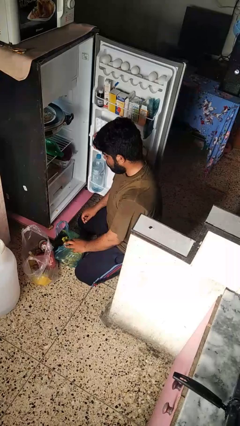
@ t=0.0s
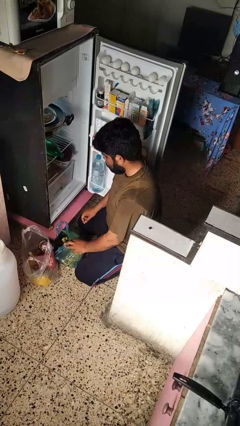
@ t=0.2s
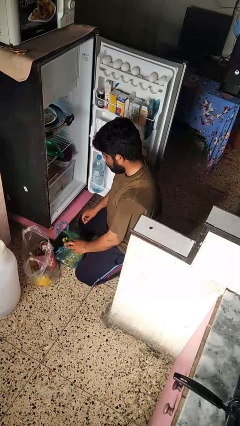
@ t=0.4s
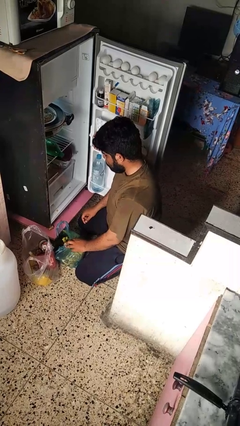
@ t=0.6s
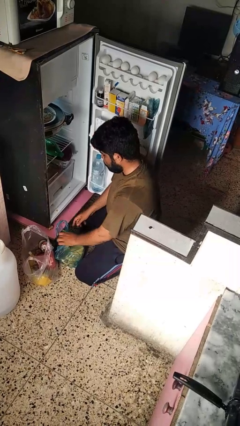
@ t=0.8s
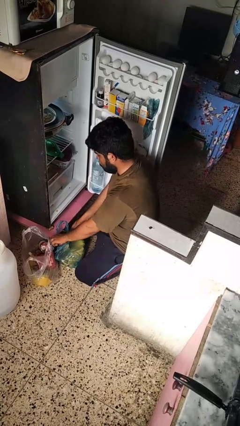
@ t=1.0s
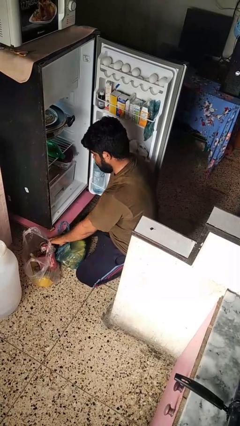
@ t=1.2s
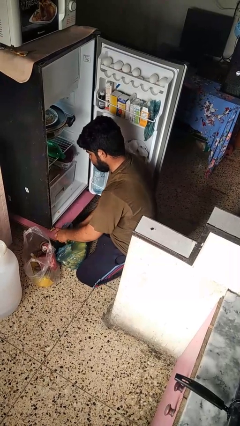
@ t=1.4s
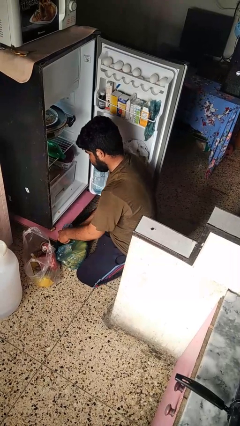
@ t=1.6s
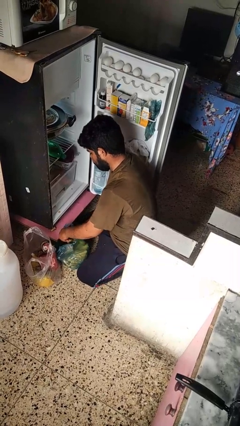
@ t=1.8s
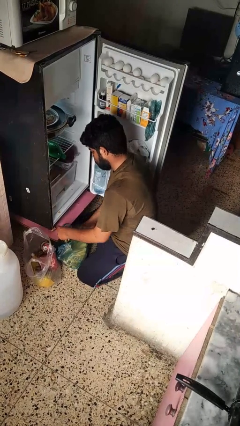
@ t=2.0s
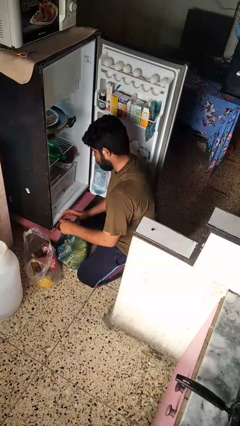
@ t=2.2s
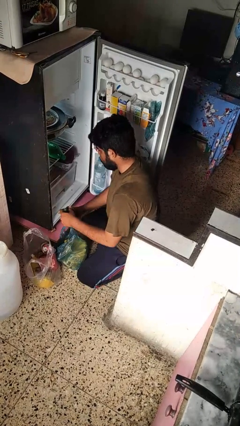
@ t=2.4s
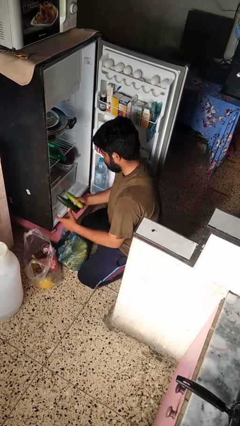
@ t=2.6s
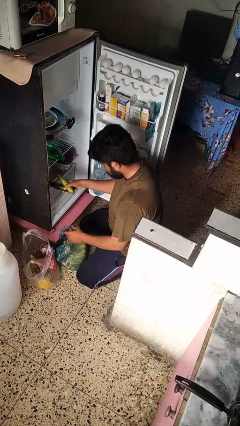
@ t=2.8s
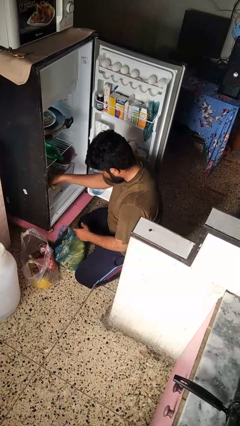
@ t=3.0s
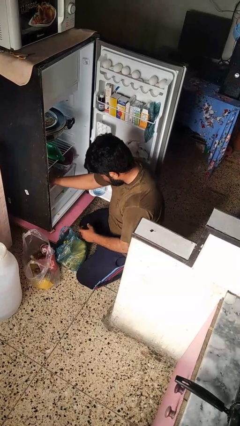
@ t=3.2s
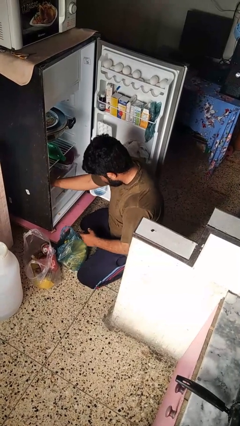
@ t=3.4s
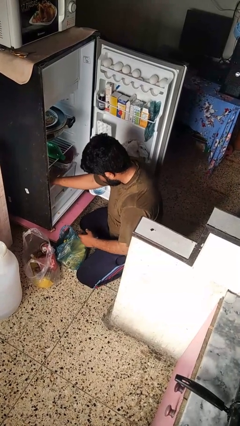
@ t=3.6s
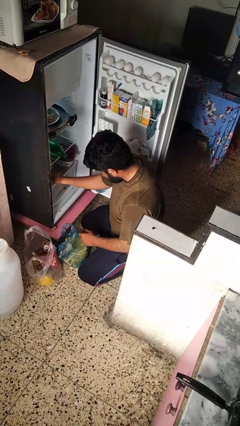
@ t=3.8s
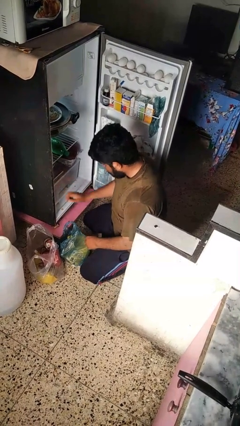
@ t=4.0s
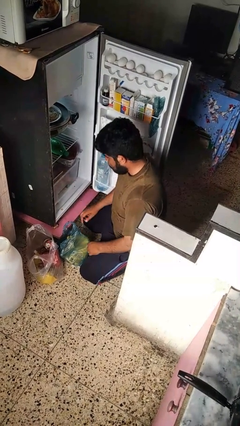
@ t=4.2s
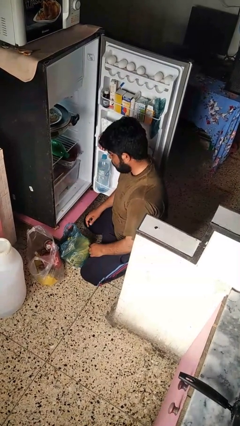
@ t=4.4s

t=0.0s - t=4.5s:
person loads groceries into refrigerator

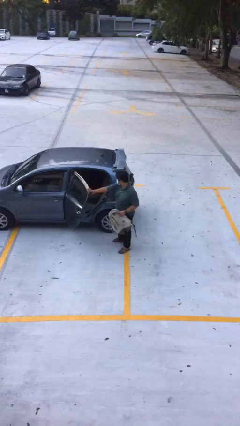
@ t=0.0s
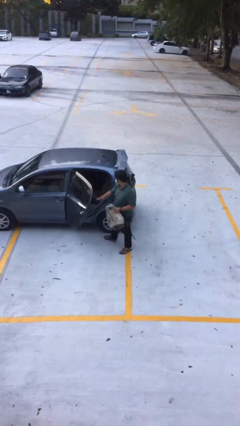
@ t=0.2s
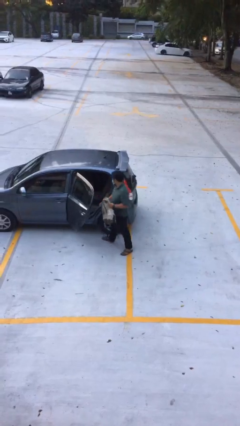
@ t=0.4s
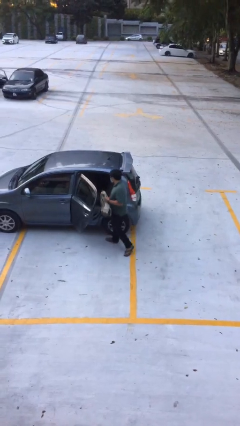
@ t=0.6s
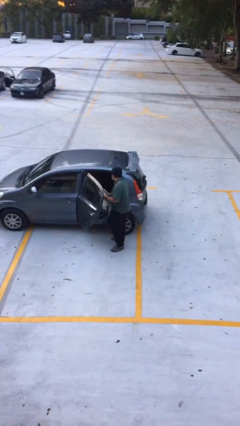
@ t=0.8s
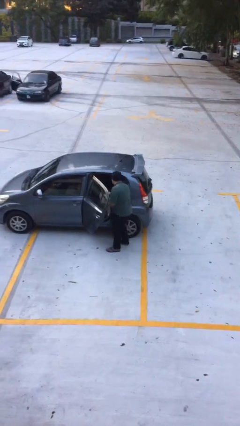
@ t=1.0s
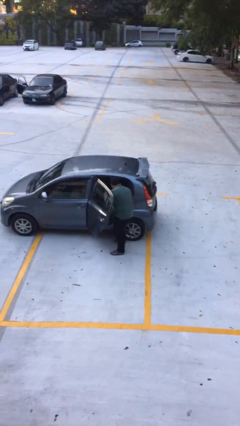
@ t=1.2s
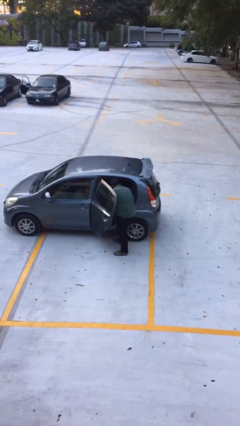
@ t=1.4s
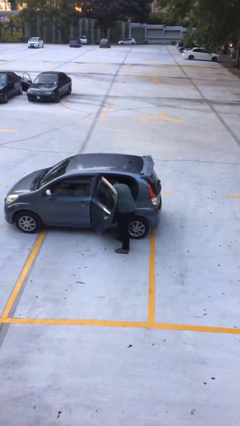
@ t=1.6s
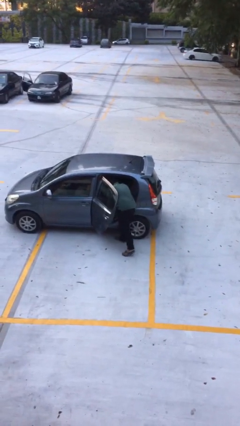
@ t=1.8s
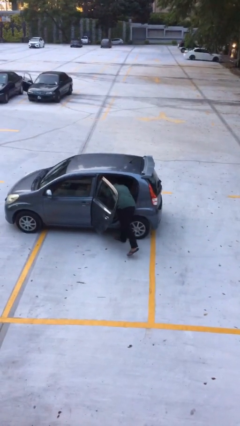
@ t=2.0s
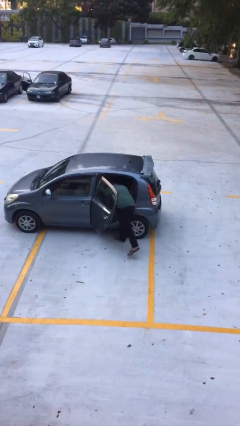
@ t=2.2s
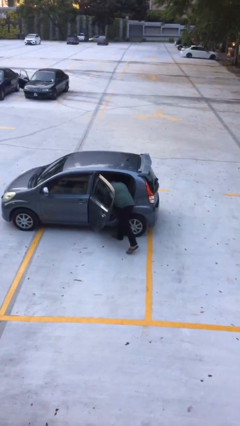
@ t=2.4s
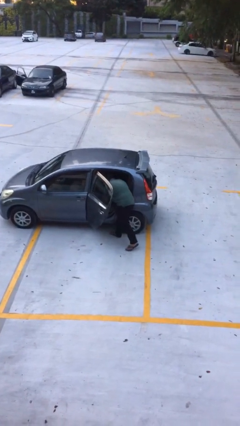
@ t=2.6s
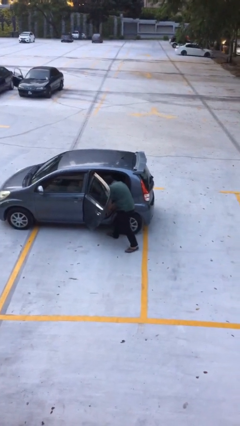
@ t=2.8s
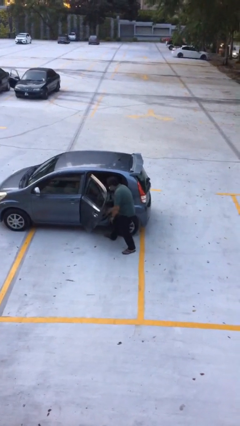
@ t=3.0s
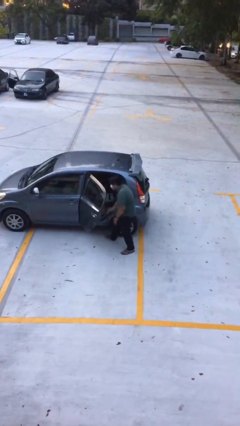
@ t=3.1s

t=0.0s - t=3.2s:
person loads car

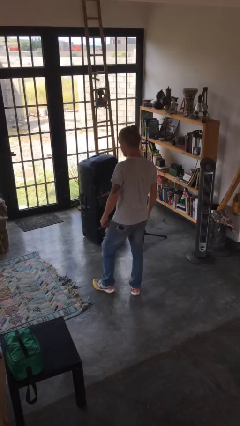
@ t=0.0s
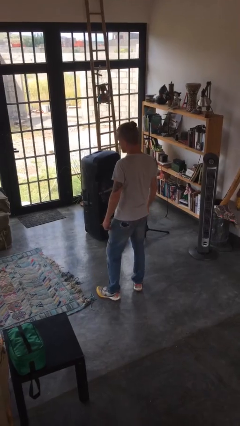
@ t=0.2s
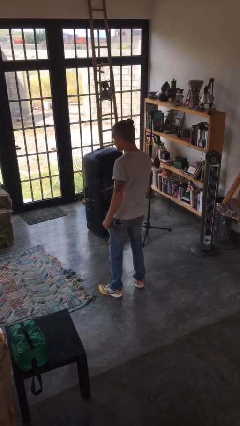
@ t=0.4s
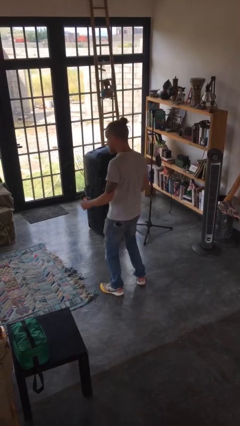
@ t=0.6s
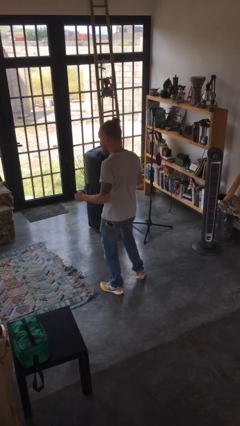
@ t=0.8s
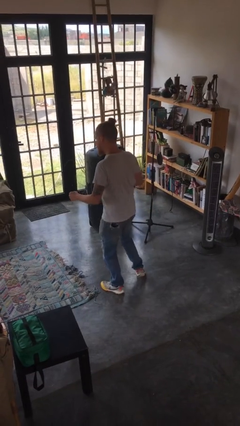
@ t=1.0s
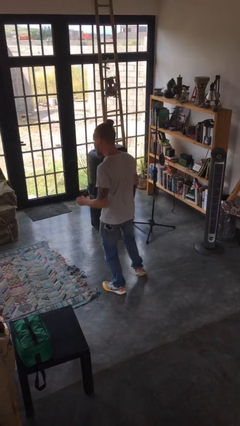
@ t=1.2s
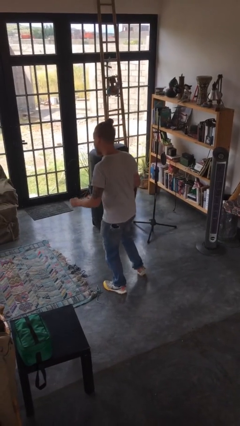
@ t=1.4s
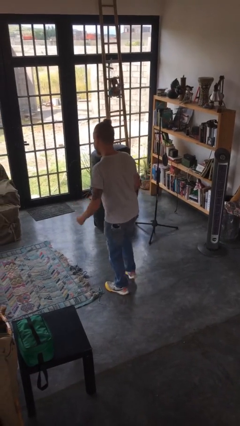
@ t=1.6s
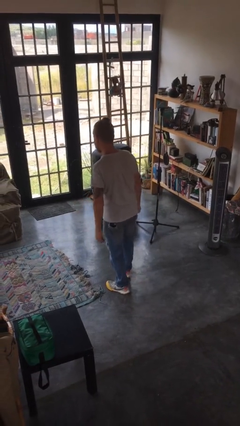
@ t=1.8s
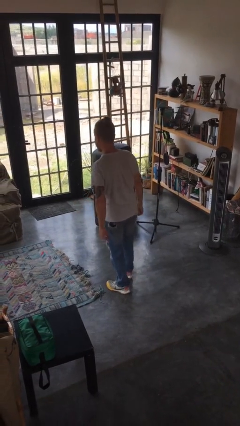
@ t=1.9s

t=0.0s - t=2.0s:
person wiggles hips

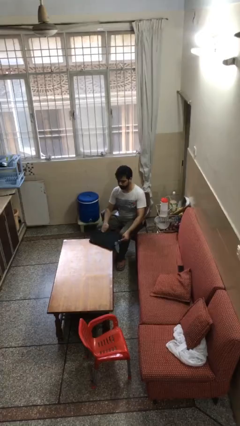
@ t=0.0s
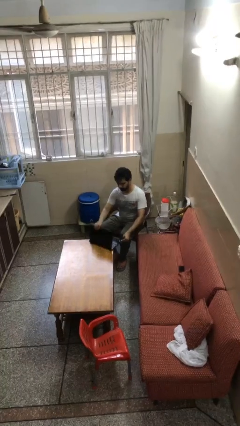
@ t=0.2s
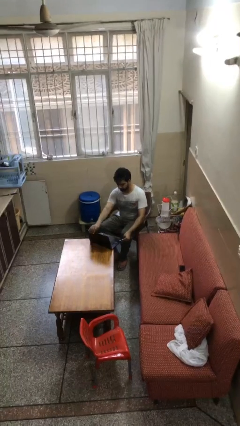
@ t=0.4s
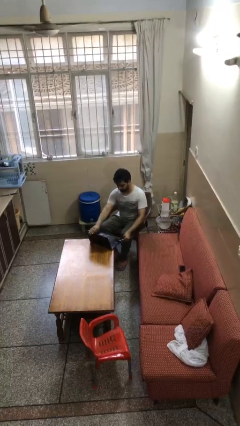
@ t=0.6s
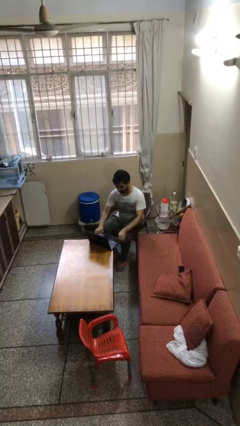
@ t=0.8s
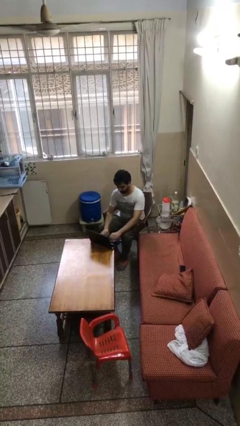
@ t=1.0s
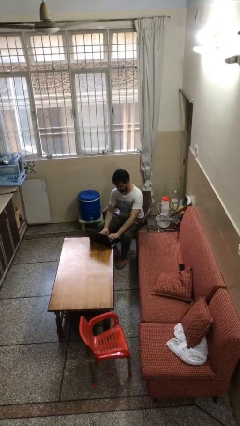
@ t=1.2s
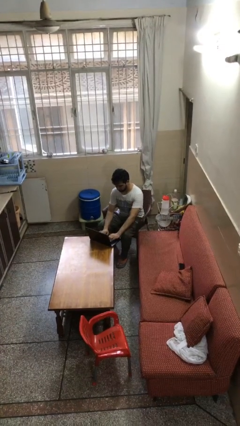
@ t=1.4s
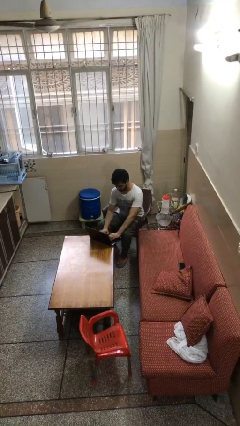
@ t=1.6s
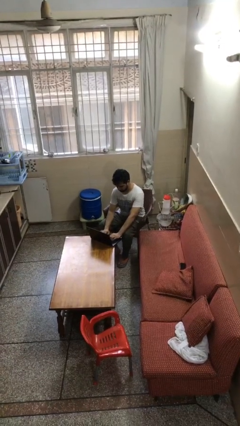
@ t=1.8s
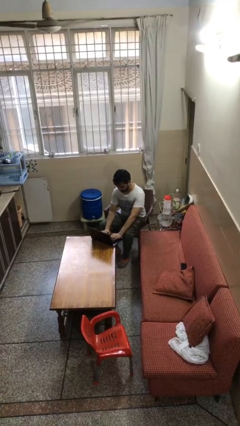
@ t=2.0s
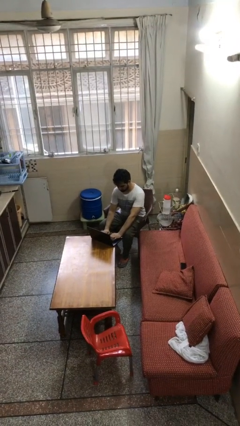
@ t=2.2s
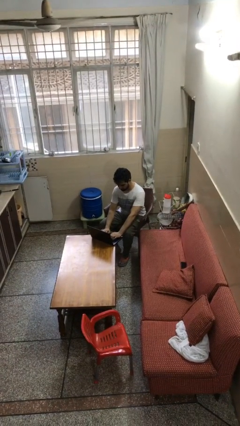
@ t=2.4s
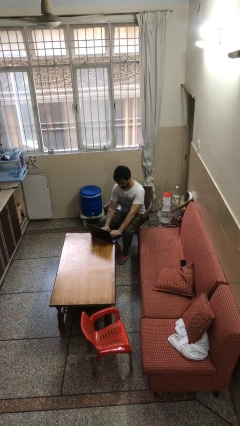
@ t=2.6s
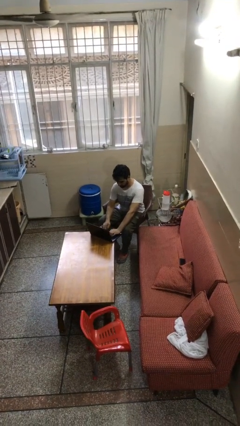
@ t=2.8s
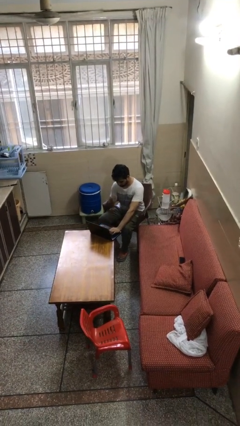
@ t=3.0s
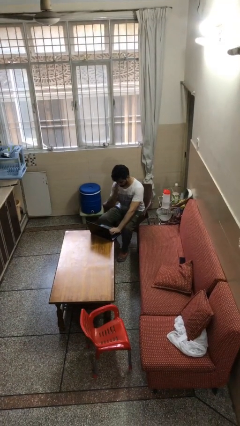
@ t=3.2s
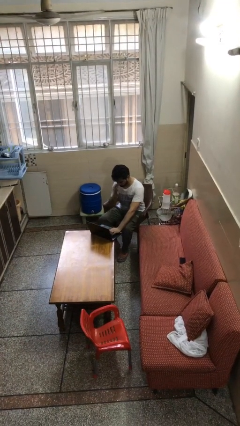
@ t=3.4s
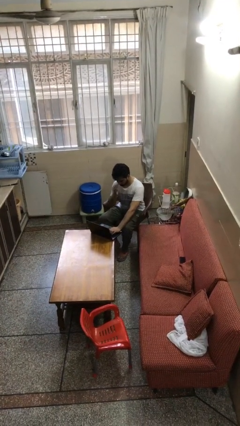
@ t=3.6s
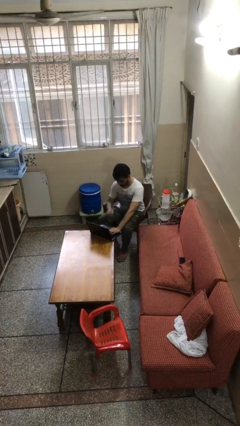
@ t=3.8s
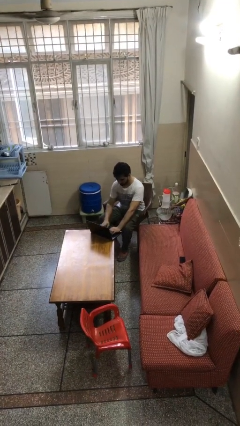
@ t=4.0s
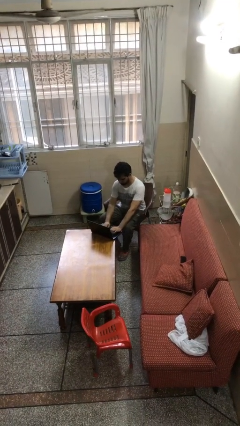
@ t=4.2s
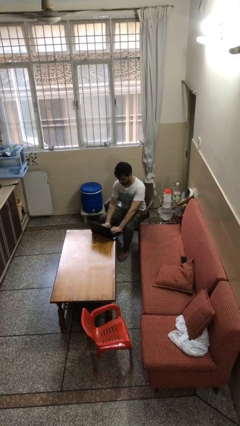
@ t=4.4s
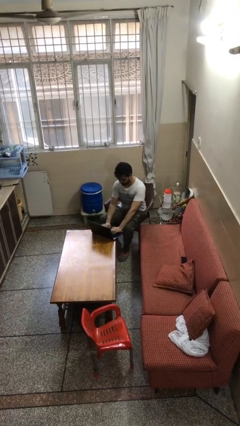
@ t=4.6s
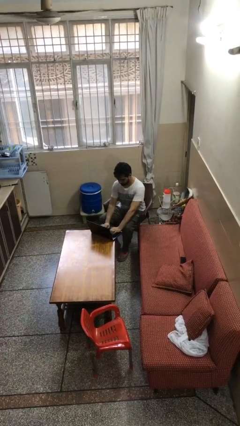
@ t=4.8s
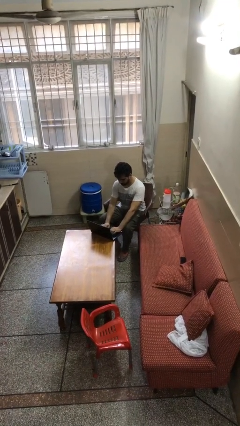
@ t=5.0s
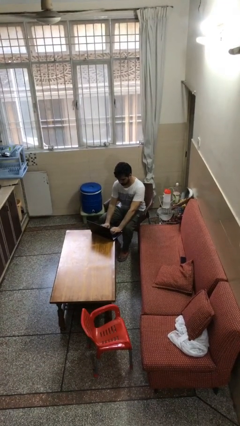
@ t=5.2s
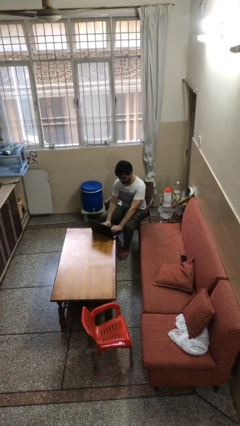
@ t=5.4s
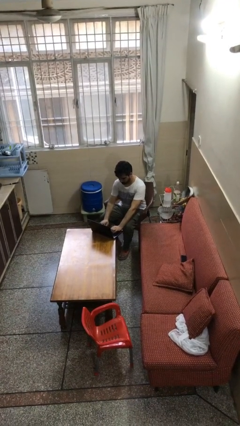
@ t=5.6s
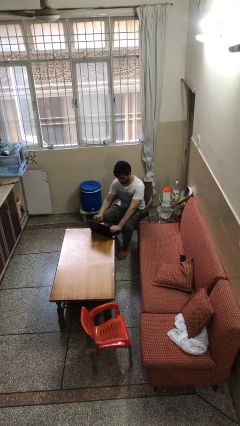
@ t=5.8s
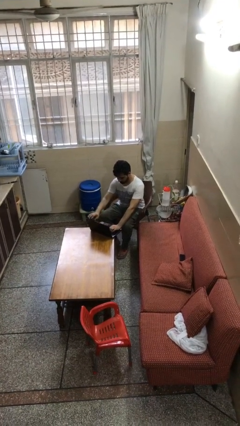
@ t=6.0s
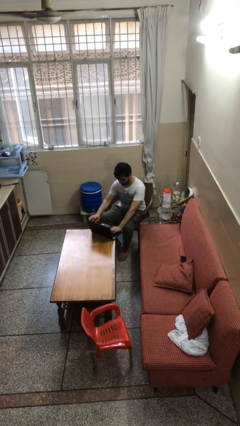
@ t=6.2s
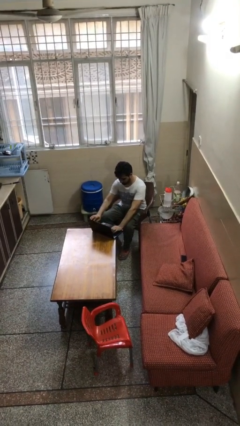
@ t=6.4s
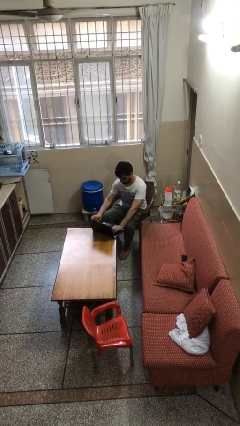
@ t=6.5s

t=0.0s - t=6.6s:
person interacts with laptop

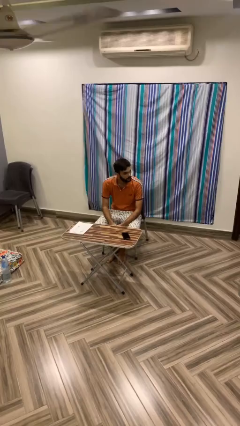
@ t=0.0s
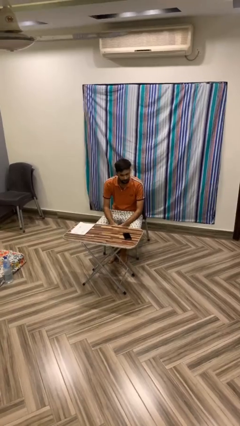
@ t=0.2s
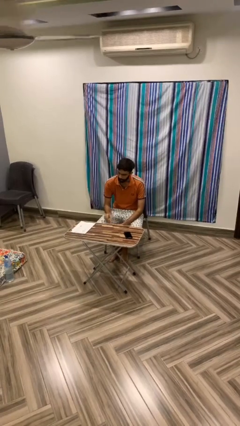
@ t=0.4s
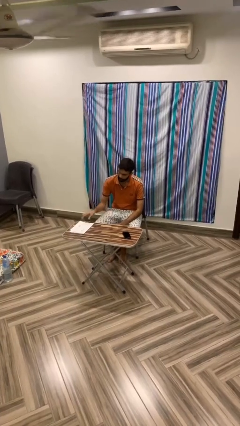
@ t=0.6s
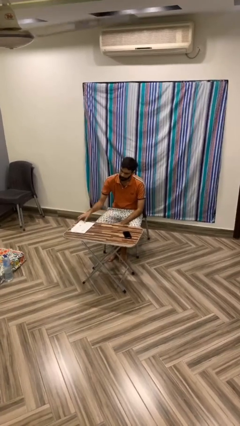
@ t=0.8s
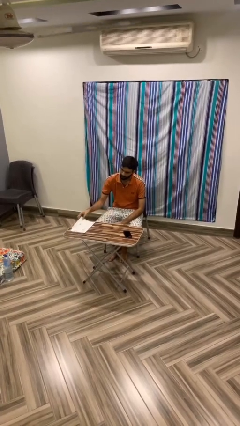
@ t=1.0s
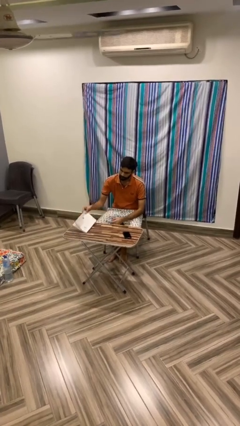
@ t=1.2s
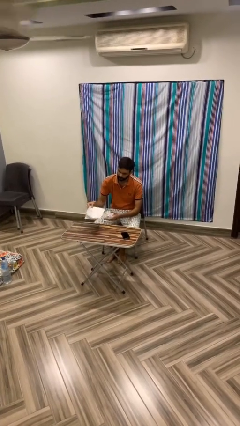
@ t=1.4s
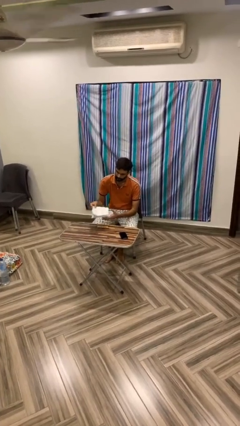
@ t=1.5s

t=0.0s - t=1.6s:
person picks up object from table
